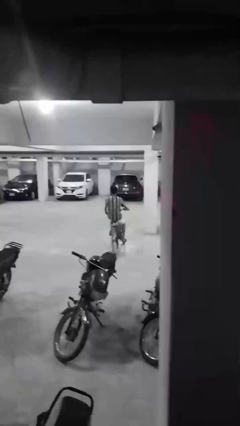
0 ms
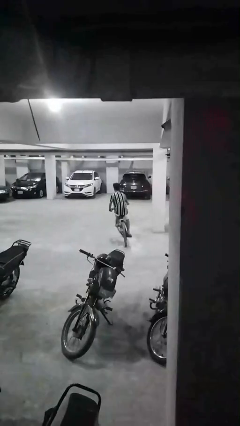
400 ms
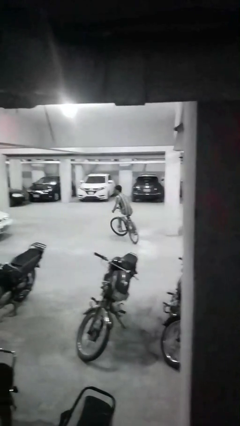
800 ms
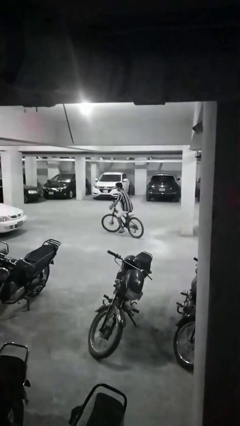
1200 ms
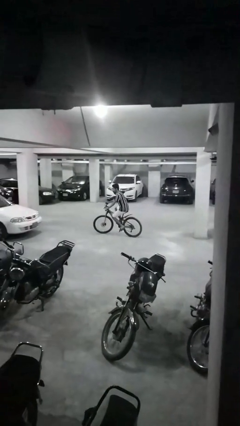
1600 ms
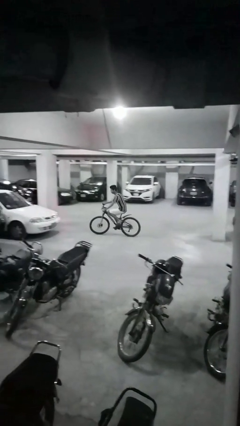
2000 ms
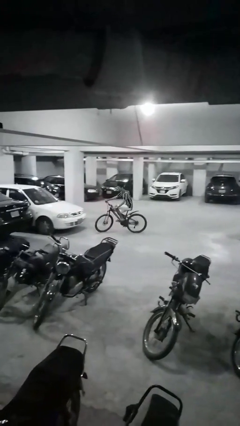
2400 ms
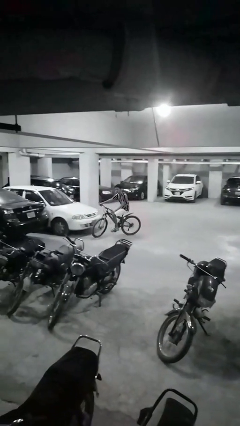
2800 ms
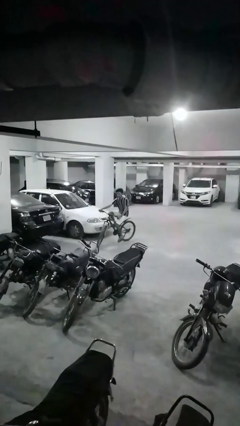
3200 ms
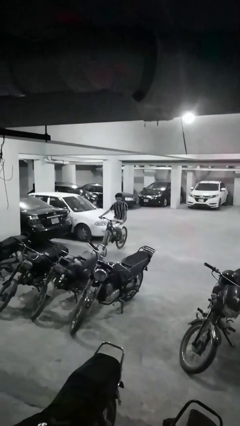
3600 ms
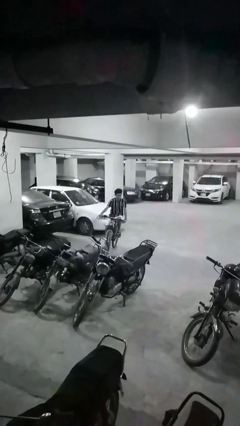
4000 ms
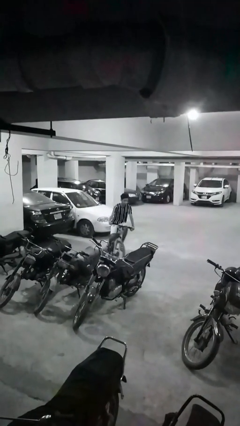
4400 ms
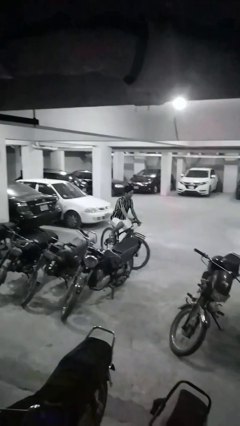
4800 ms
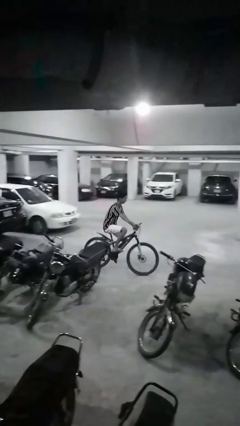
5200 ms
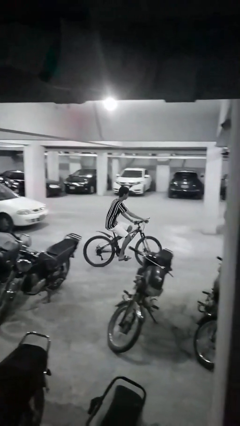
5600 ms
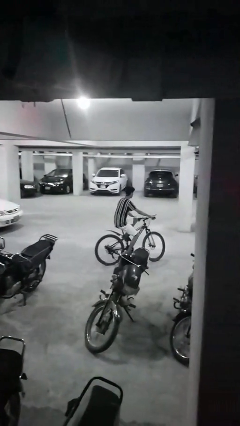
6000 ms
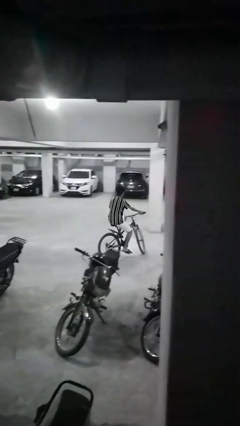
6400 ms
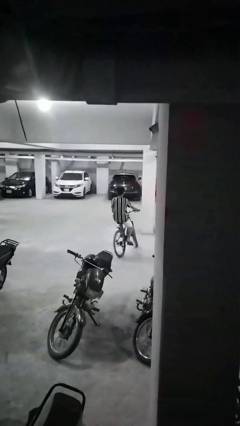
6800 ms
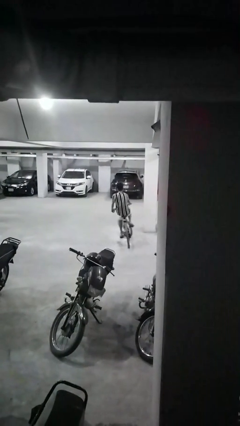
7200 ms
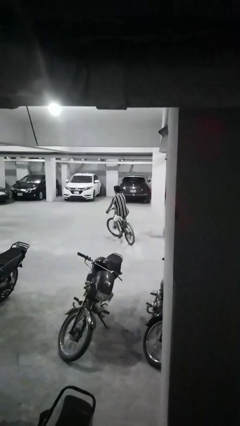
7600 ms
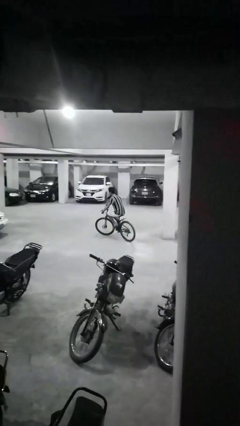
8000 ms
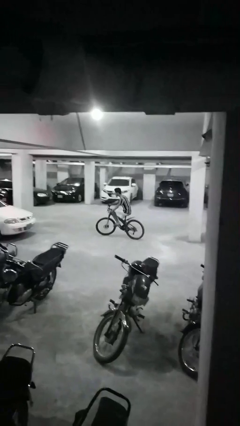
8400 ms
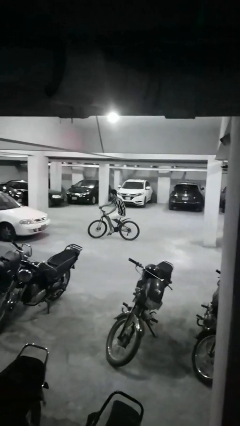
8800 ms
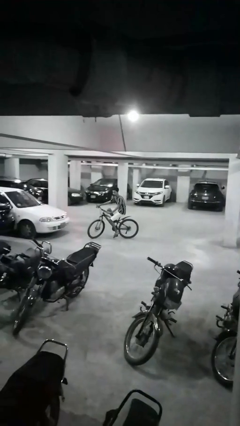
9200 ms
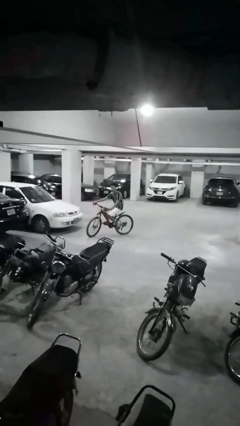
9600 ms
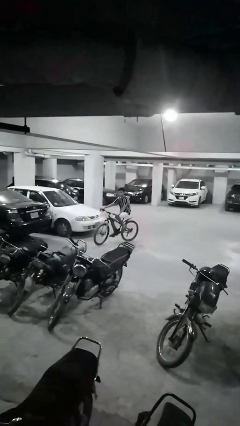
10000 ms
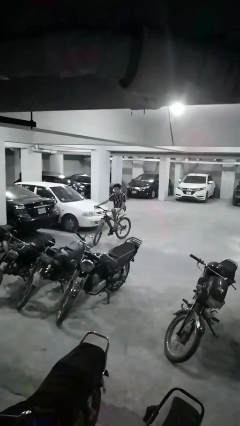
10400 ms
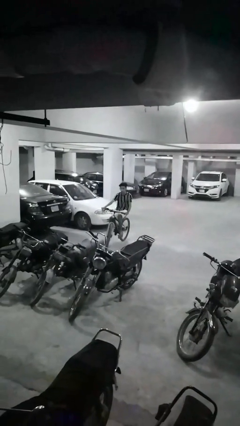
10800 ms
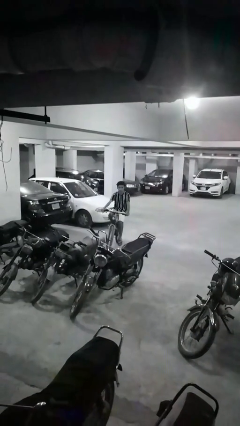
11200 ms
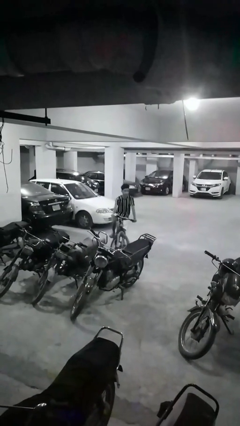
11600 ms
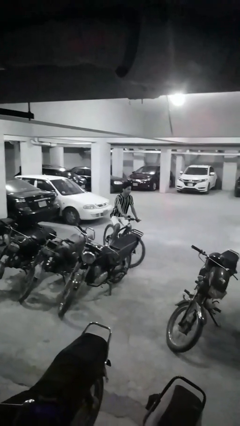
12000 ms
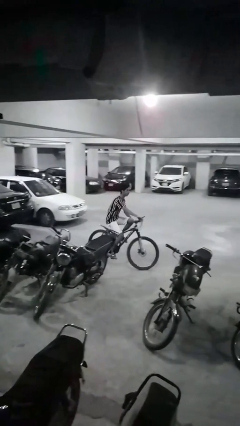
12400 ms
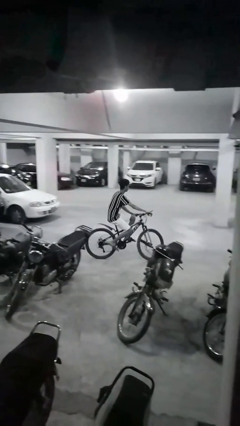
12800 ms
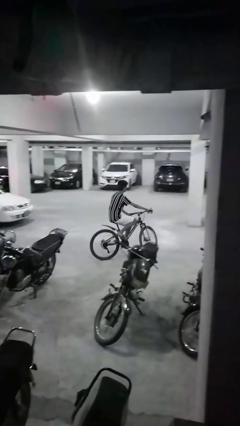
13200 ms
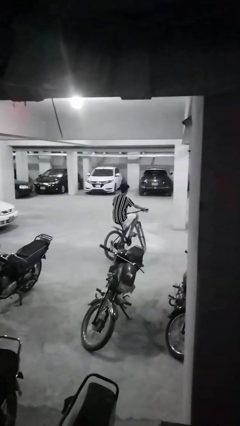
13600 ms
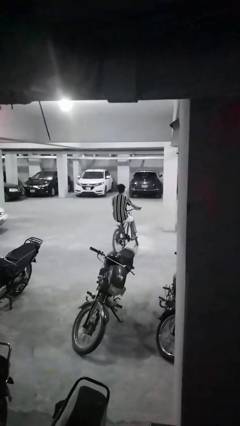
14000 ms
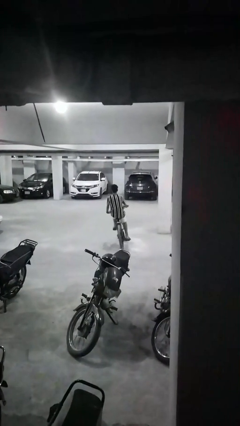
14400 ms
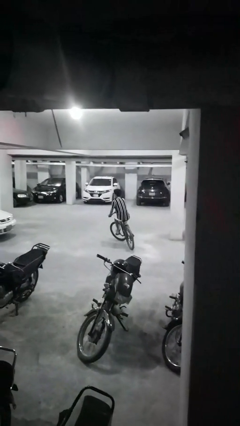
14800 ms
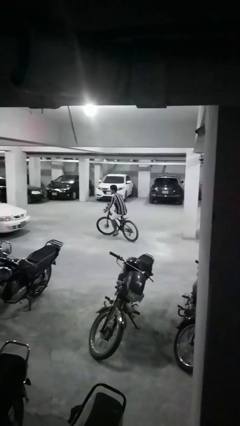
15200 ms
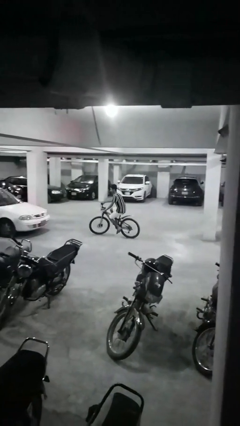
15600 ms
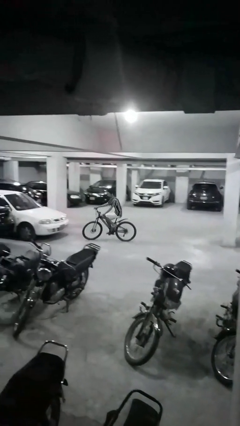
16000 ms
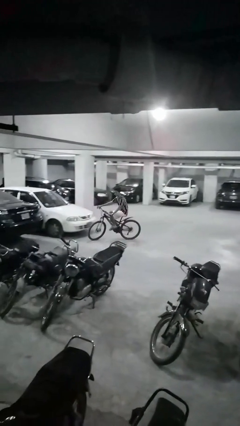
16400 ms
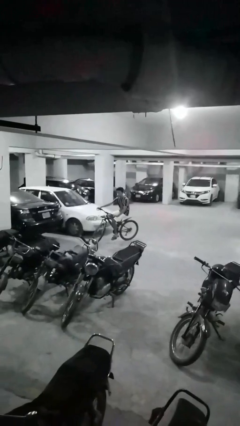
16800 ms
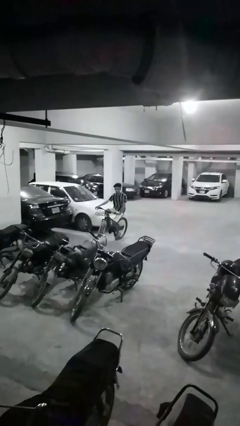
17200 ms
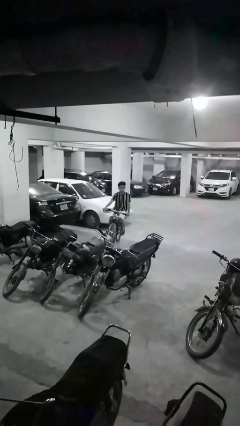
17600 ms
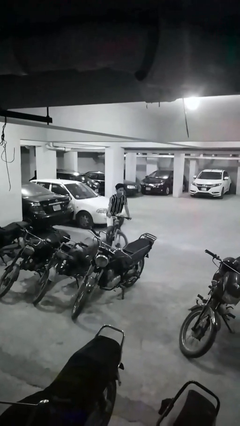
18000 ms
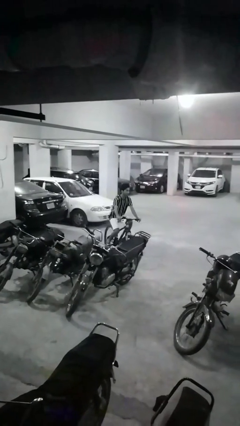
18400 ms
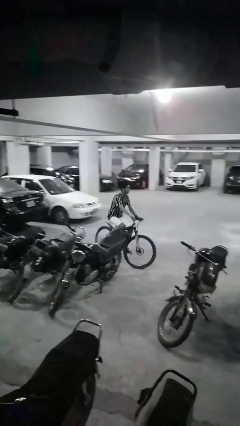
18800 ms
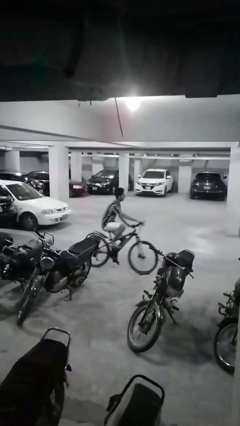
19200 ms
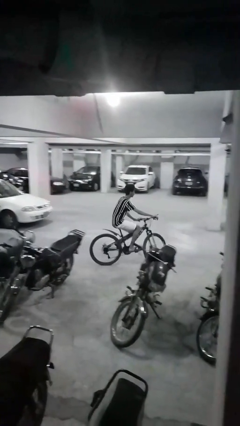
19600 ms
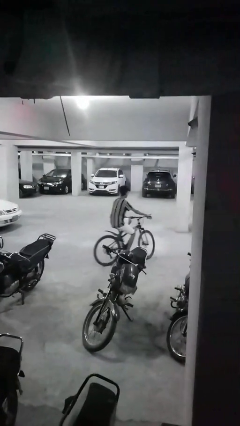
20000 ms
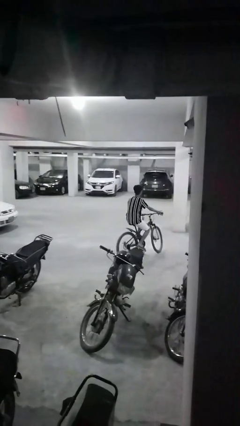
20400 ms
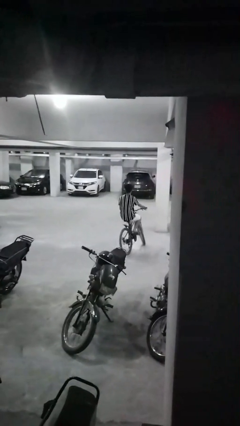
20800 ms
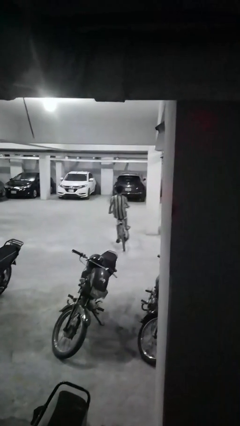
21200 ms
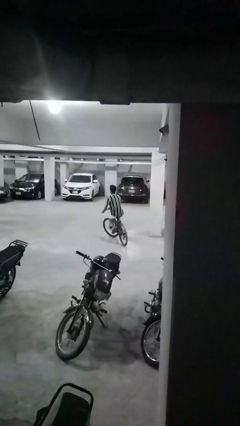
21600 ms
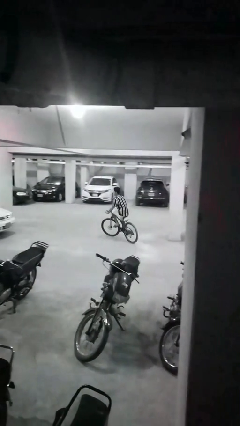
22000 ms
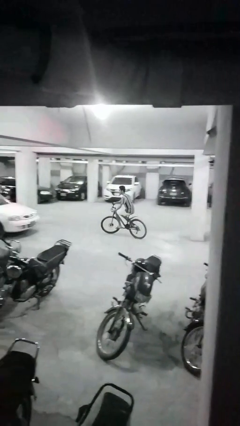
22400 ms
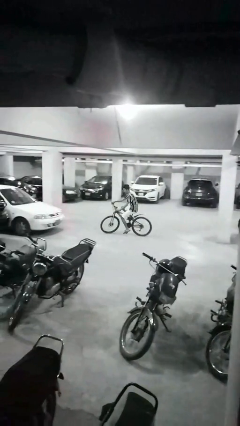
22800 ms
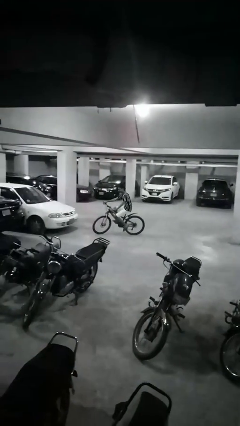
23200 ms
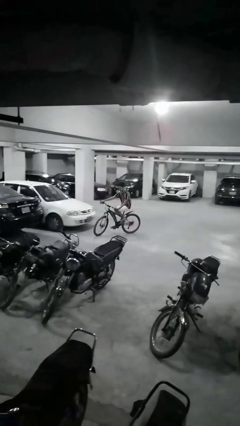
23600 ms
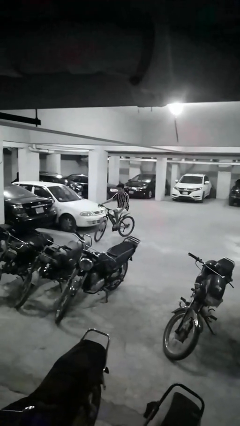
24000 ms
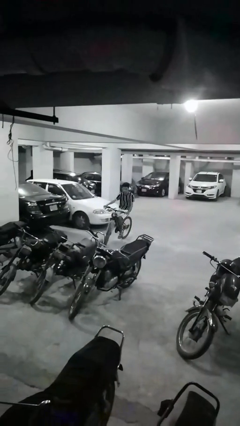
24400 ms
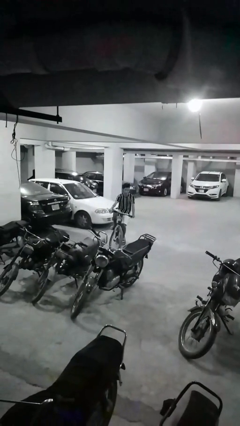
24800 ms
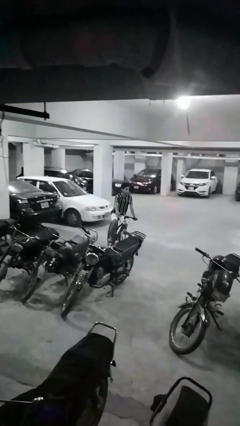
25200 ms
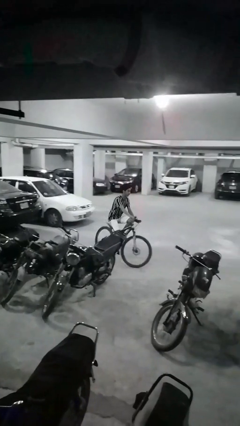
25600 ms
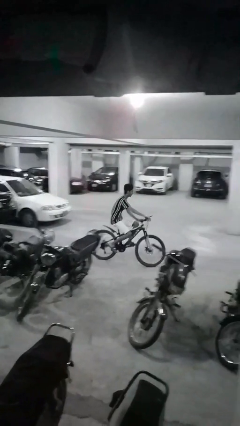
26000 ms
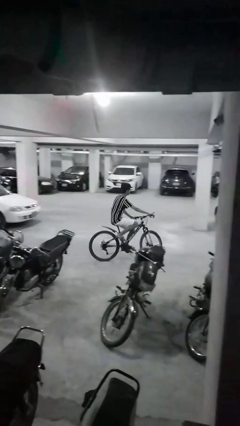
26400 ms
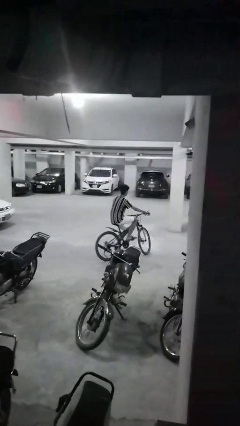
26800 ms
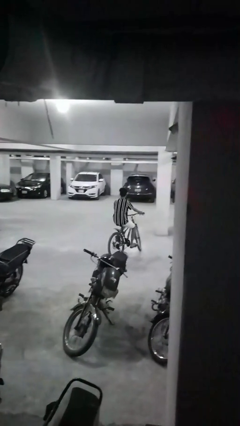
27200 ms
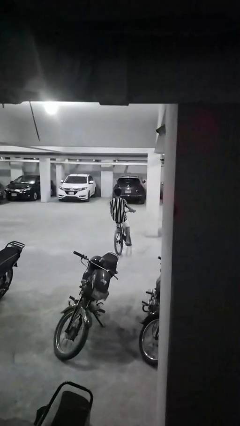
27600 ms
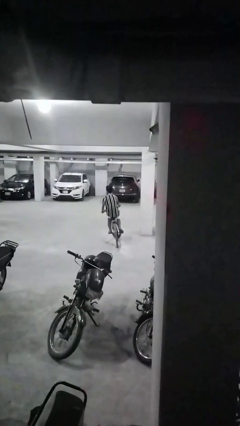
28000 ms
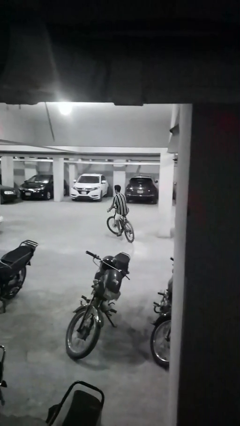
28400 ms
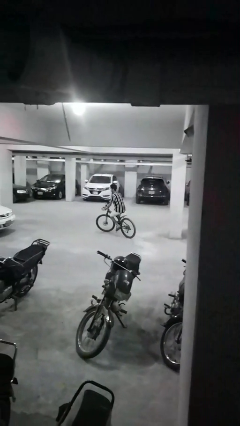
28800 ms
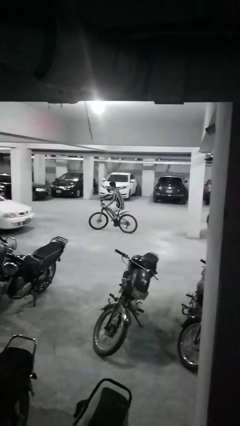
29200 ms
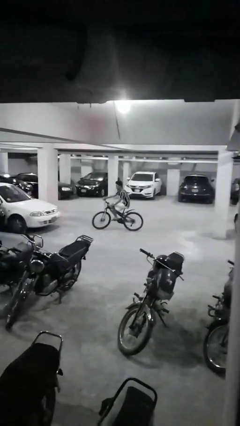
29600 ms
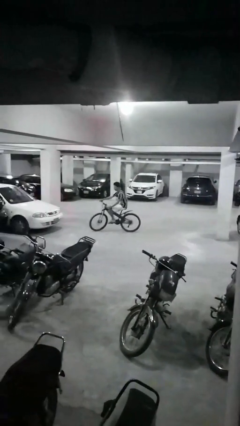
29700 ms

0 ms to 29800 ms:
person rides bicycle

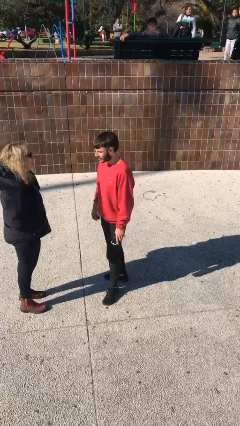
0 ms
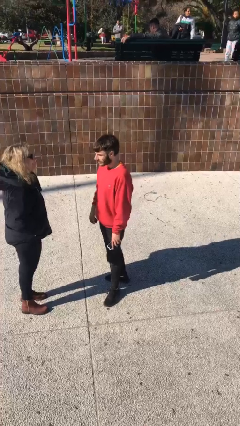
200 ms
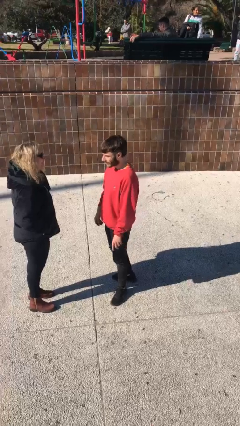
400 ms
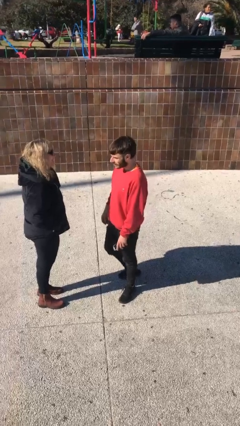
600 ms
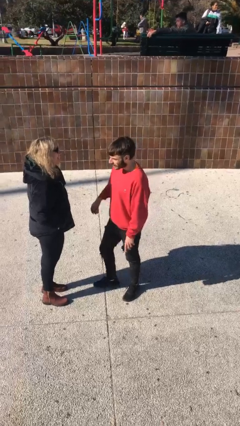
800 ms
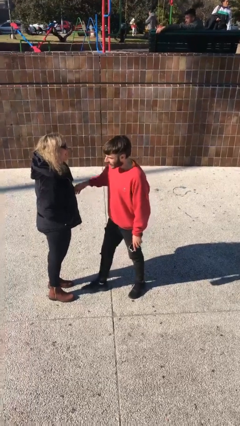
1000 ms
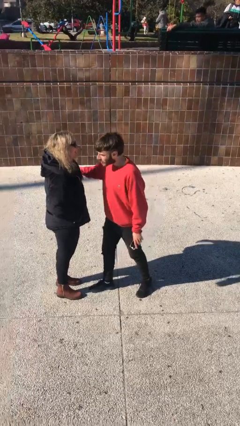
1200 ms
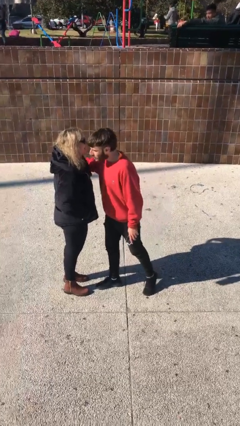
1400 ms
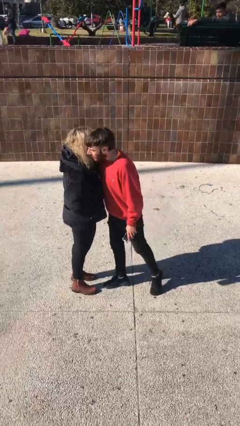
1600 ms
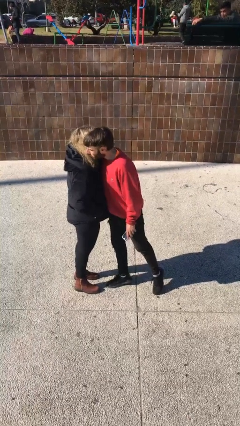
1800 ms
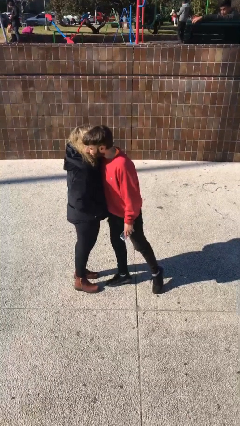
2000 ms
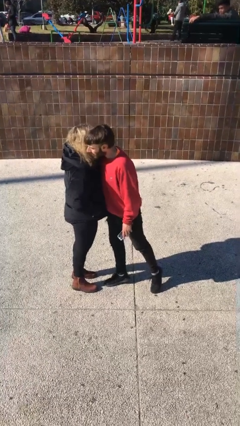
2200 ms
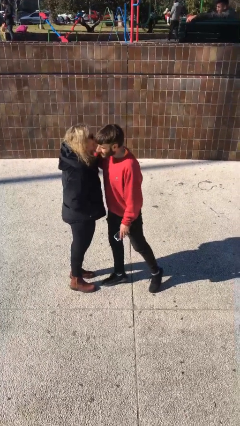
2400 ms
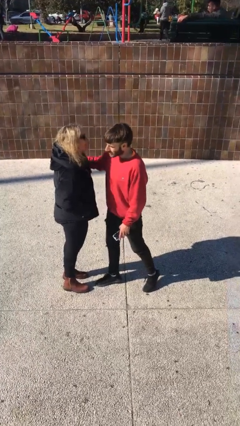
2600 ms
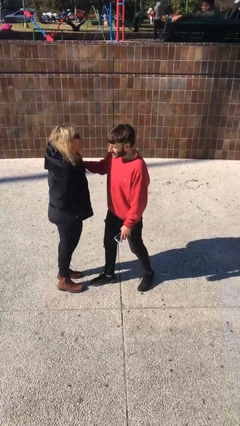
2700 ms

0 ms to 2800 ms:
person kisses cheek of person

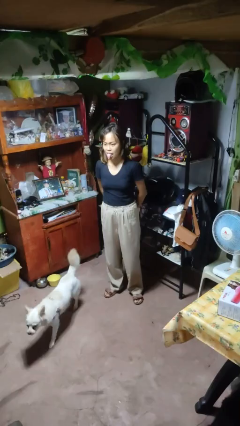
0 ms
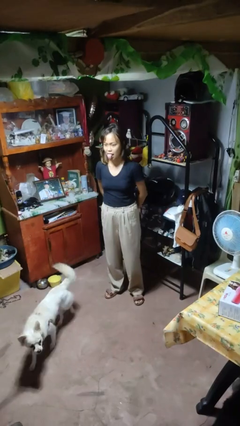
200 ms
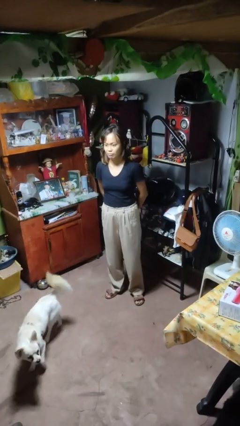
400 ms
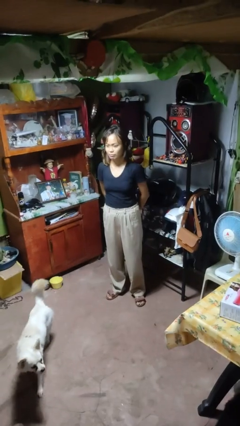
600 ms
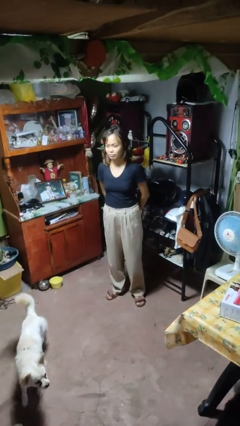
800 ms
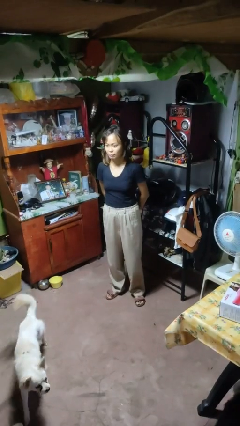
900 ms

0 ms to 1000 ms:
person sticks out tongue
